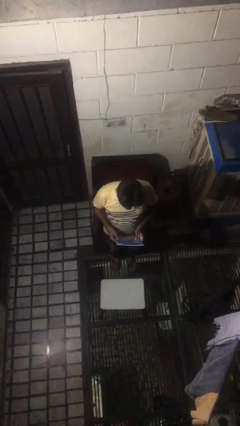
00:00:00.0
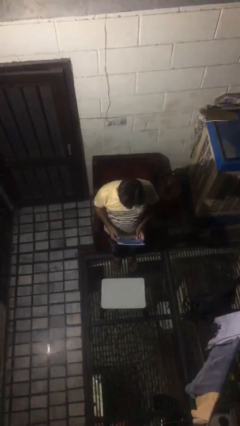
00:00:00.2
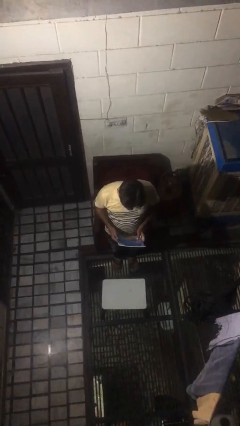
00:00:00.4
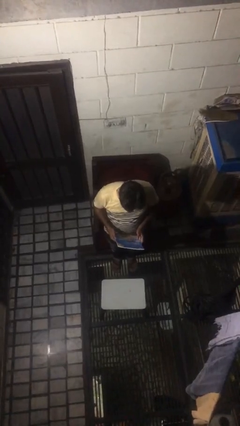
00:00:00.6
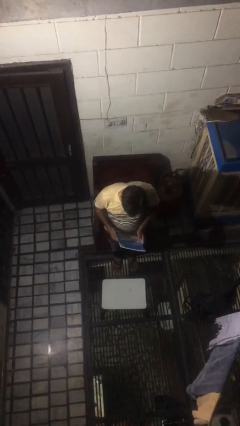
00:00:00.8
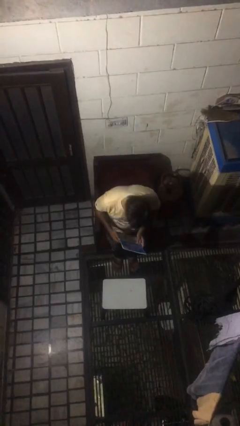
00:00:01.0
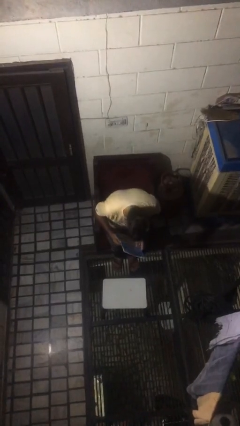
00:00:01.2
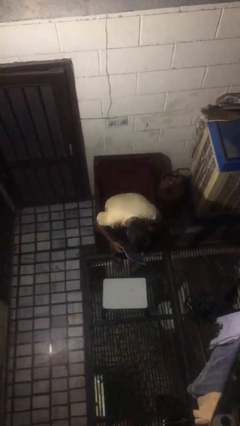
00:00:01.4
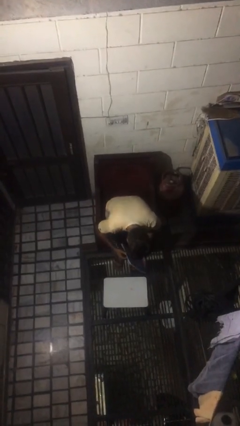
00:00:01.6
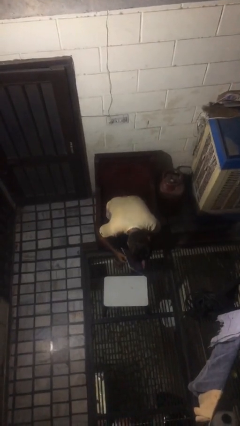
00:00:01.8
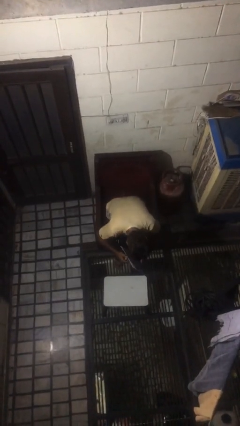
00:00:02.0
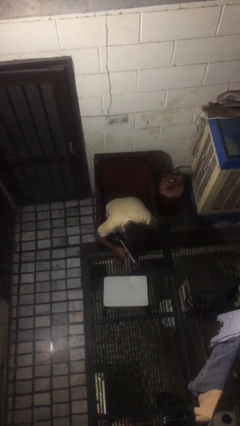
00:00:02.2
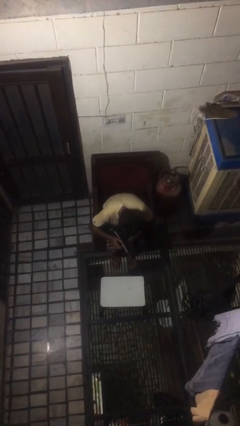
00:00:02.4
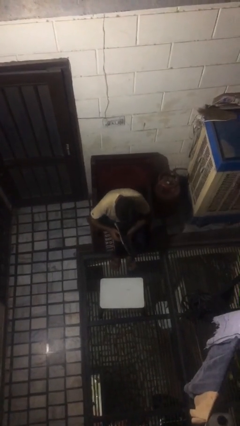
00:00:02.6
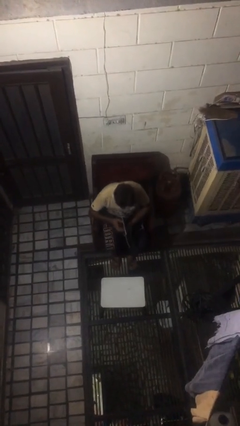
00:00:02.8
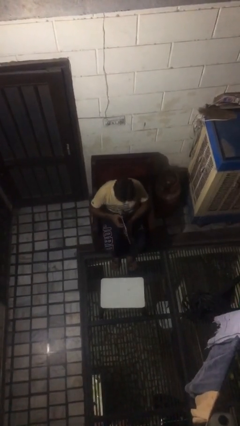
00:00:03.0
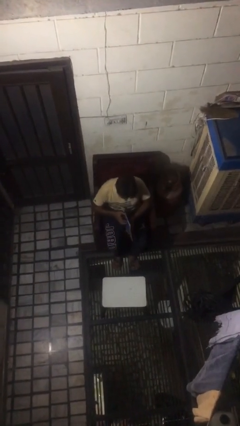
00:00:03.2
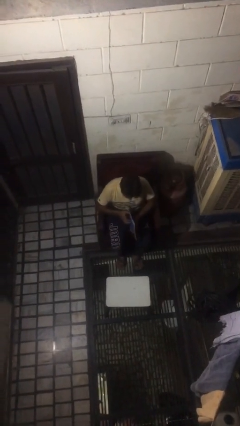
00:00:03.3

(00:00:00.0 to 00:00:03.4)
person sits down

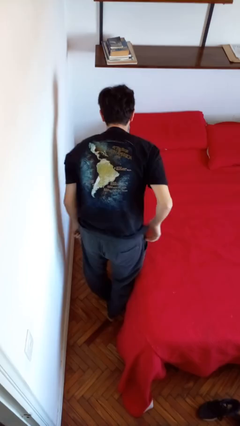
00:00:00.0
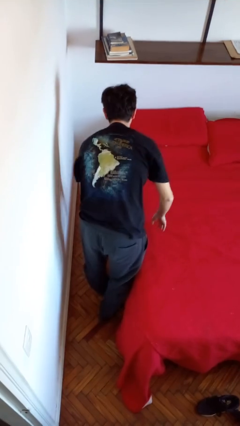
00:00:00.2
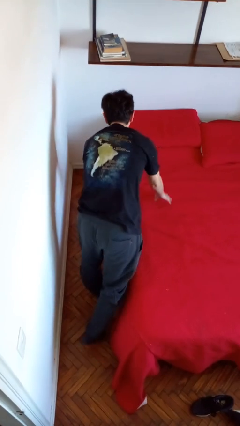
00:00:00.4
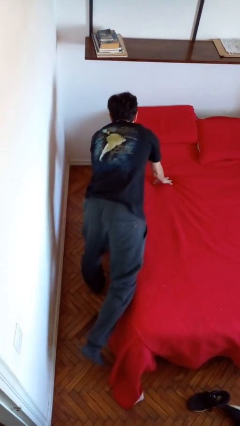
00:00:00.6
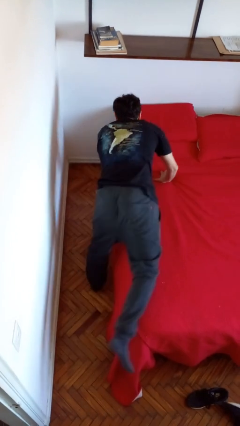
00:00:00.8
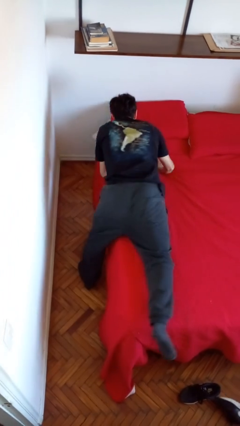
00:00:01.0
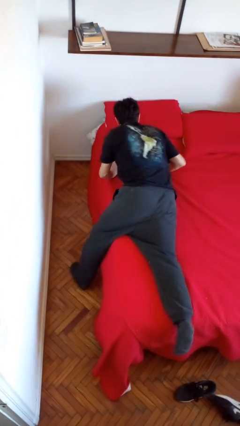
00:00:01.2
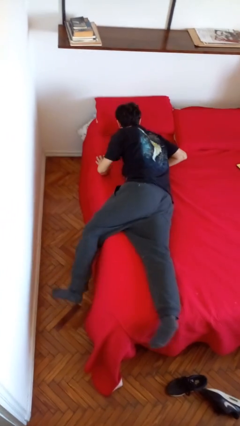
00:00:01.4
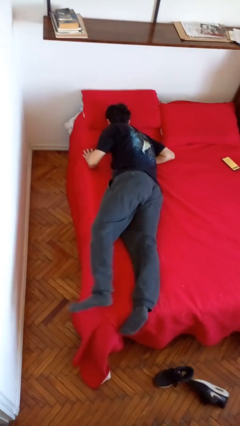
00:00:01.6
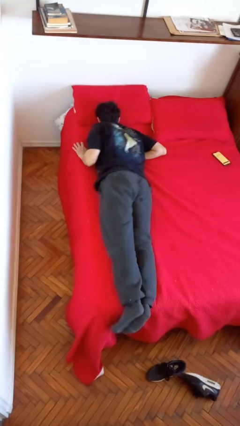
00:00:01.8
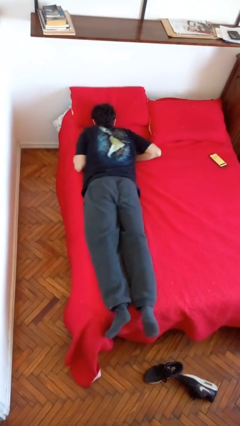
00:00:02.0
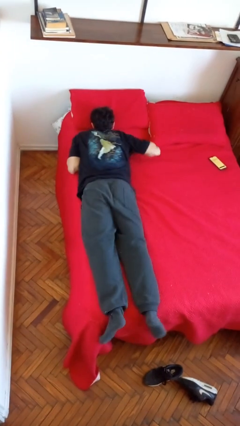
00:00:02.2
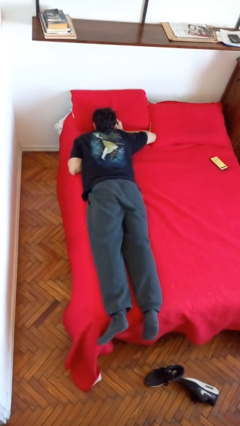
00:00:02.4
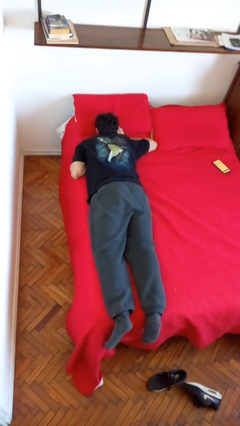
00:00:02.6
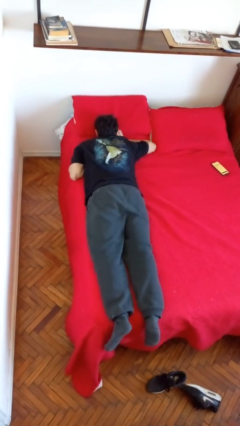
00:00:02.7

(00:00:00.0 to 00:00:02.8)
person lies down on bed

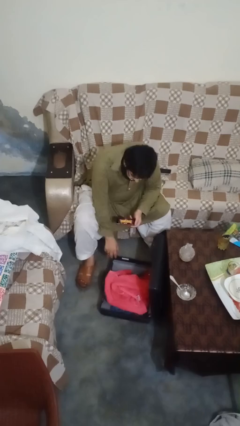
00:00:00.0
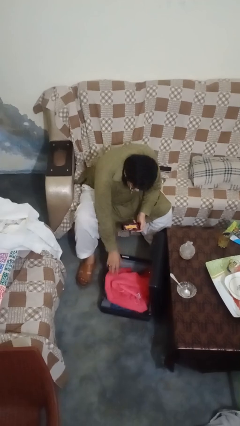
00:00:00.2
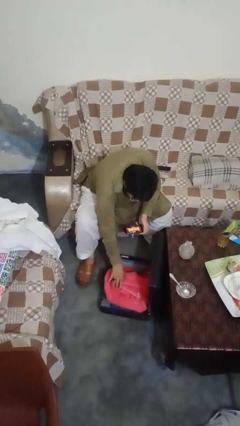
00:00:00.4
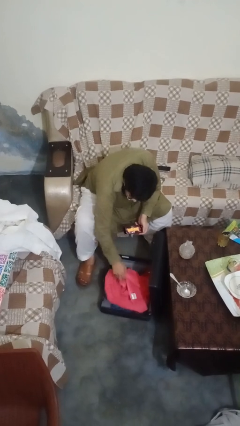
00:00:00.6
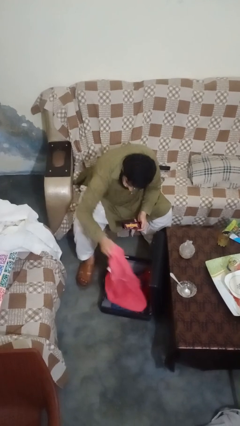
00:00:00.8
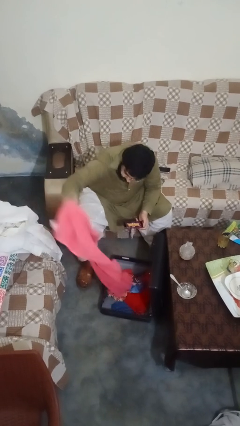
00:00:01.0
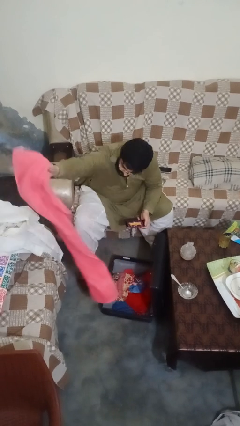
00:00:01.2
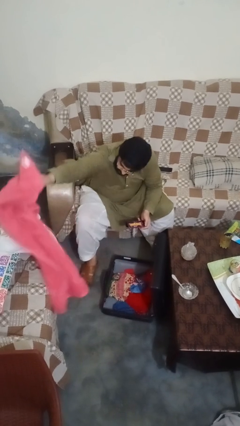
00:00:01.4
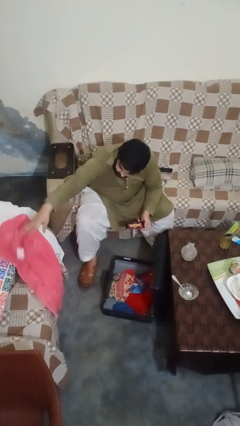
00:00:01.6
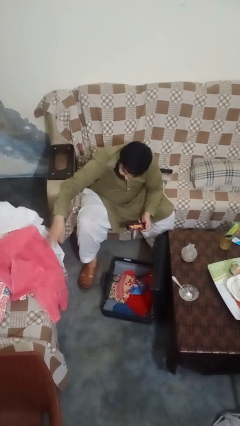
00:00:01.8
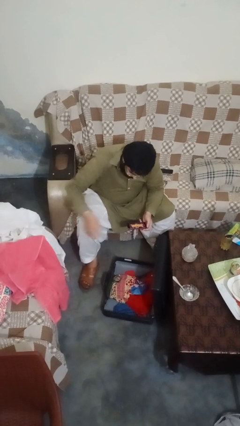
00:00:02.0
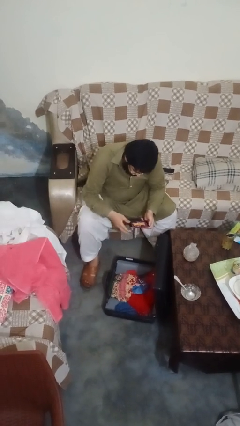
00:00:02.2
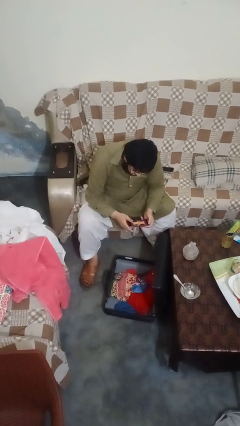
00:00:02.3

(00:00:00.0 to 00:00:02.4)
person unloads clothes from suitcase

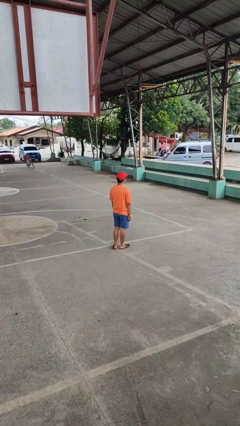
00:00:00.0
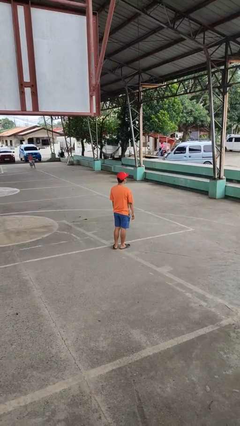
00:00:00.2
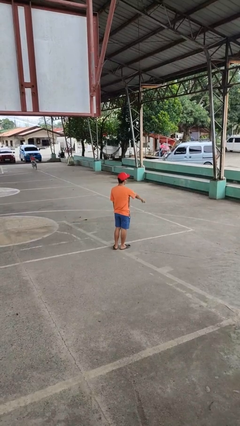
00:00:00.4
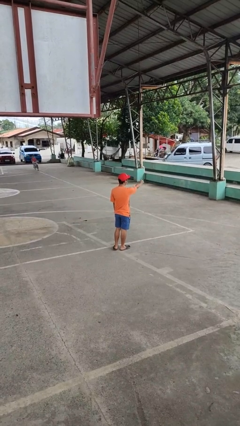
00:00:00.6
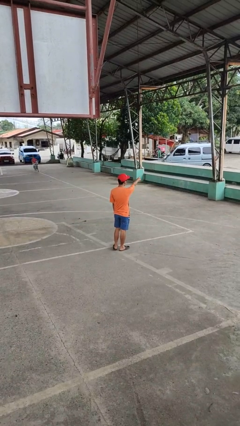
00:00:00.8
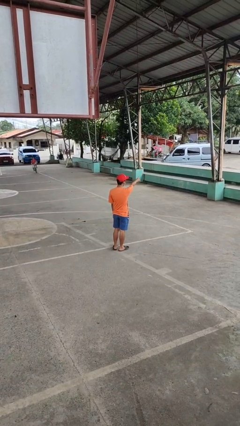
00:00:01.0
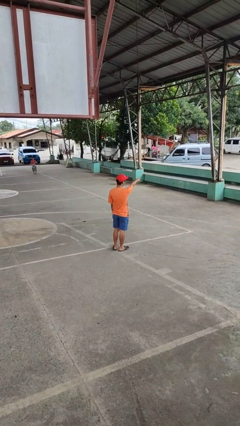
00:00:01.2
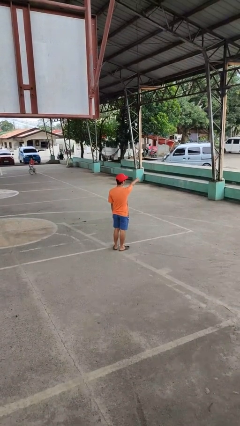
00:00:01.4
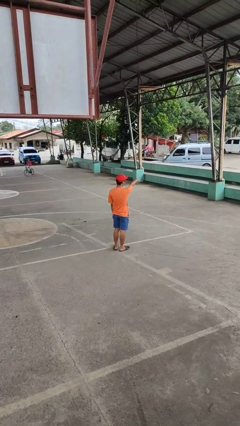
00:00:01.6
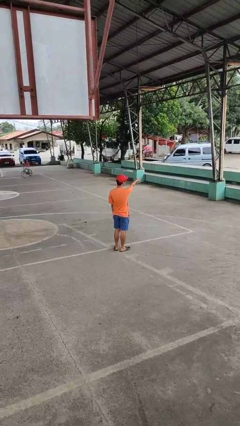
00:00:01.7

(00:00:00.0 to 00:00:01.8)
person points at person

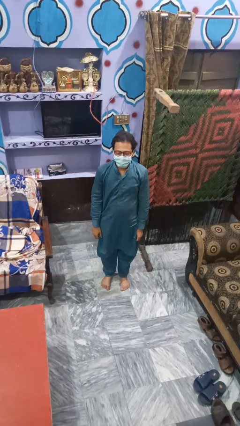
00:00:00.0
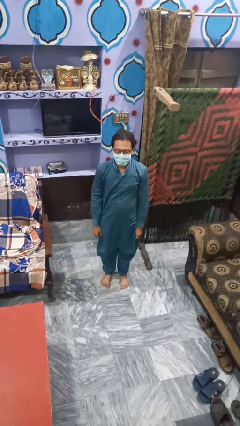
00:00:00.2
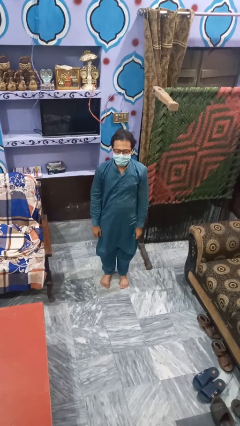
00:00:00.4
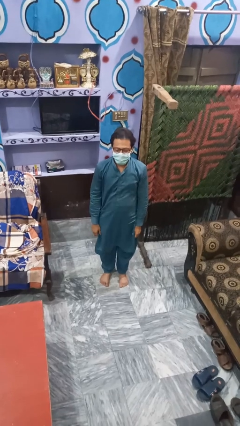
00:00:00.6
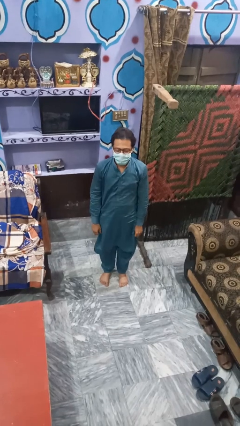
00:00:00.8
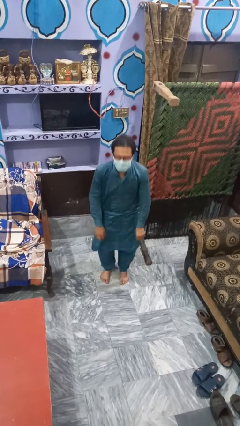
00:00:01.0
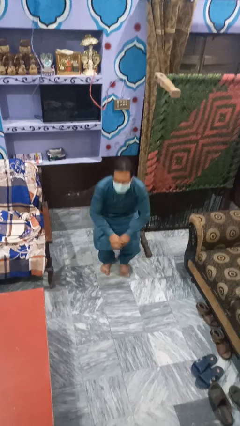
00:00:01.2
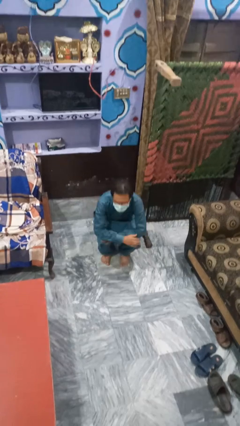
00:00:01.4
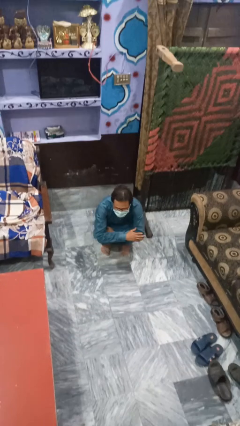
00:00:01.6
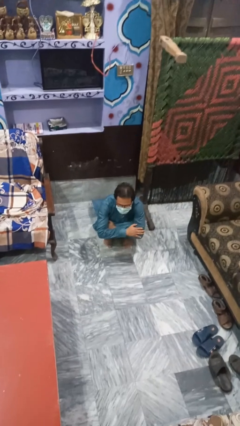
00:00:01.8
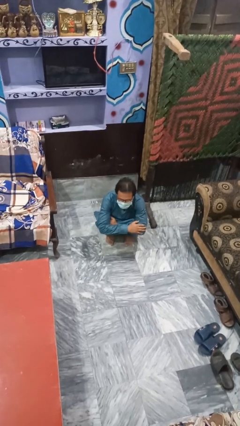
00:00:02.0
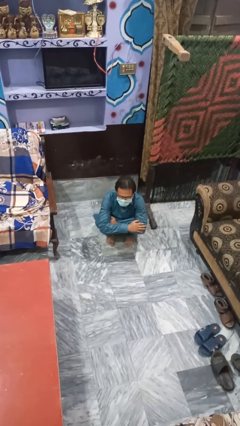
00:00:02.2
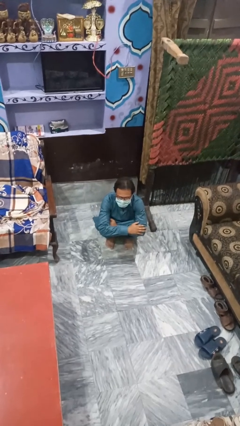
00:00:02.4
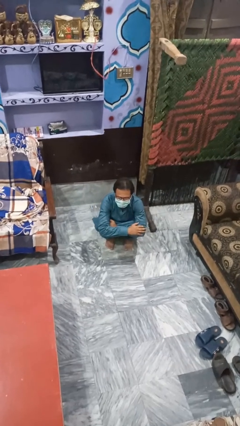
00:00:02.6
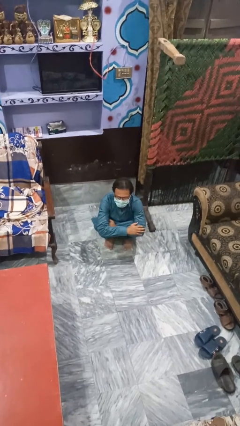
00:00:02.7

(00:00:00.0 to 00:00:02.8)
person squats

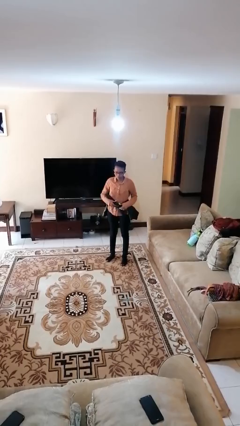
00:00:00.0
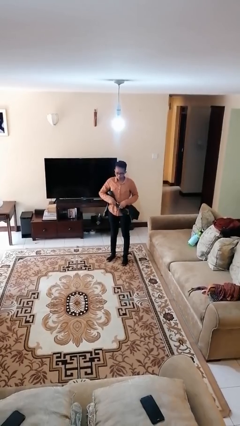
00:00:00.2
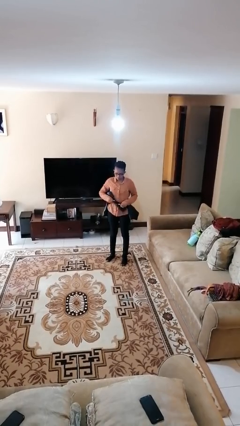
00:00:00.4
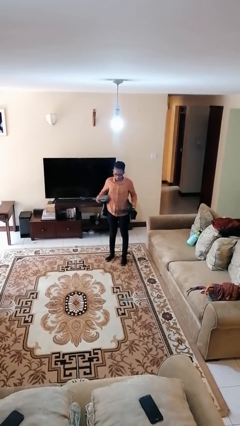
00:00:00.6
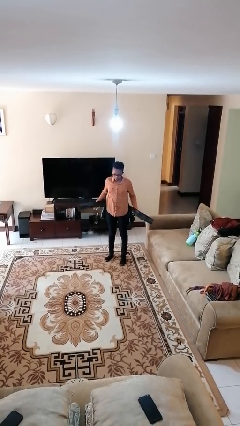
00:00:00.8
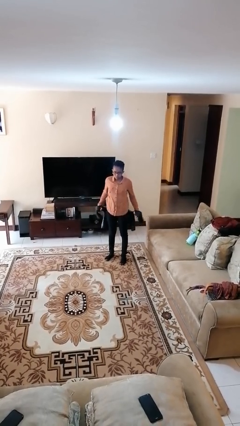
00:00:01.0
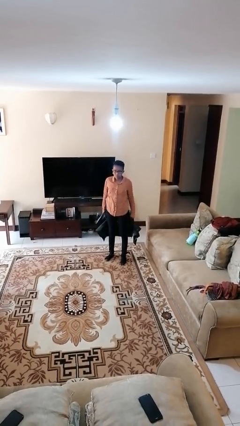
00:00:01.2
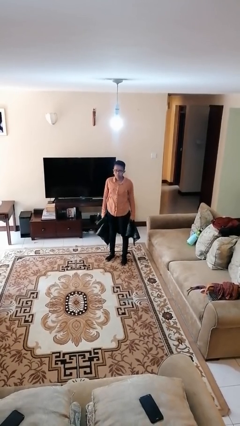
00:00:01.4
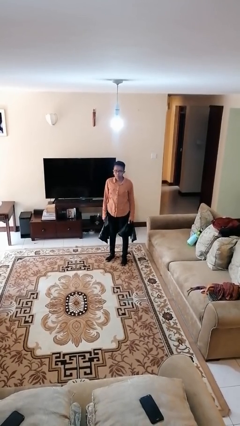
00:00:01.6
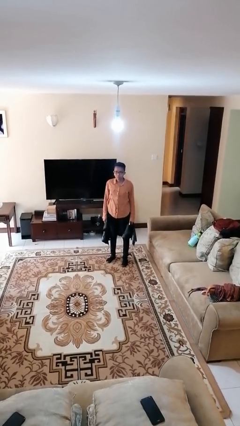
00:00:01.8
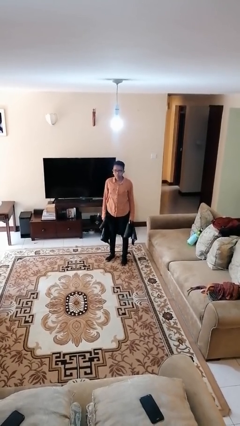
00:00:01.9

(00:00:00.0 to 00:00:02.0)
person unties jacket around waist

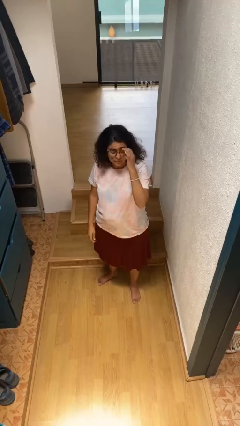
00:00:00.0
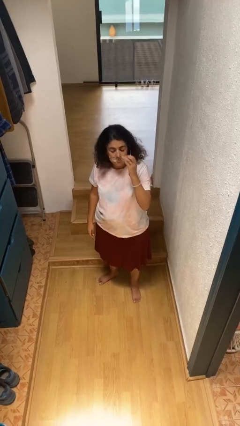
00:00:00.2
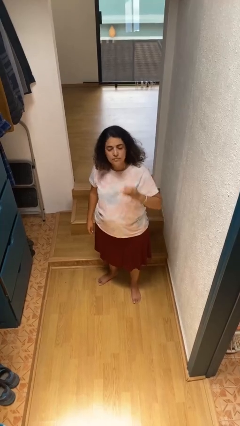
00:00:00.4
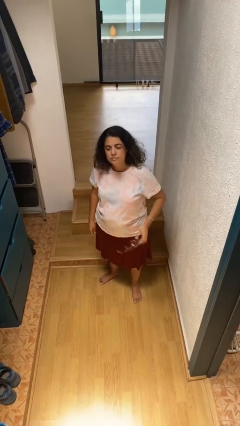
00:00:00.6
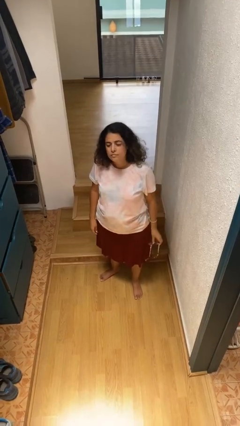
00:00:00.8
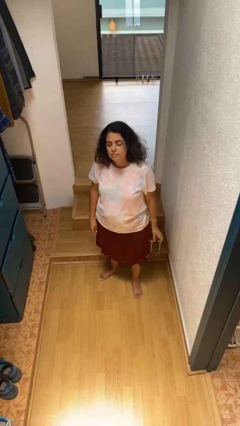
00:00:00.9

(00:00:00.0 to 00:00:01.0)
person takes off glasses

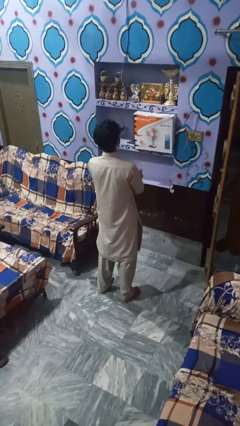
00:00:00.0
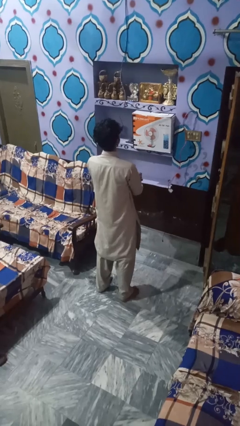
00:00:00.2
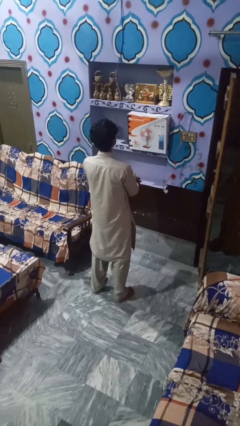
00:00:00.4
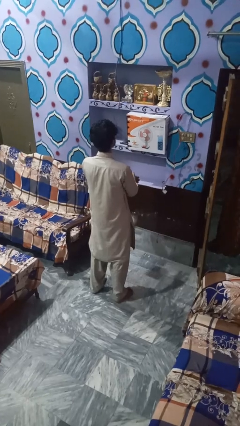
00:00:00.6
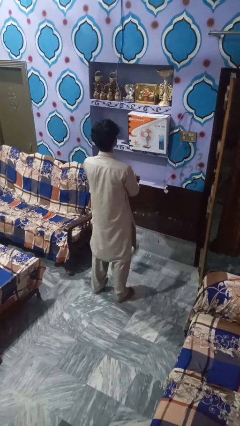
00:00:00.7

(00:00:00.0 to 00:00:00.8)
person catches dropped object
